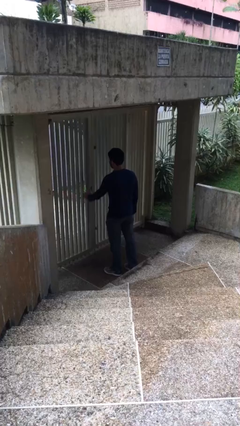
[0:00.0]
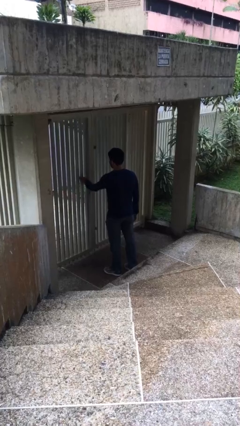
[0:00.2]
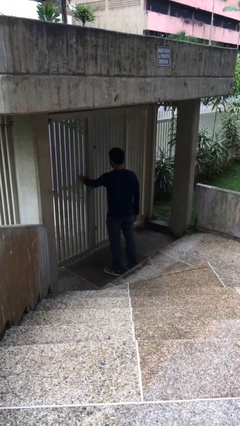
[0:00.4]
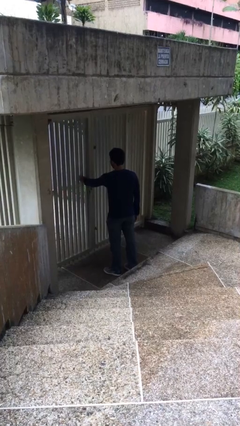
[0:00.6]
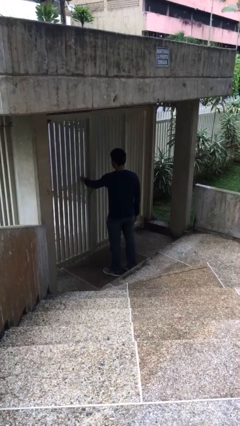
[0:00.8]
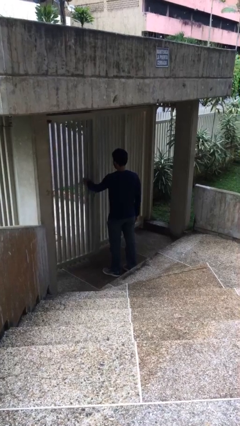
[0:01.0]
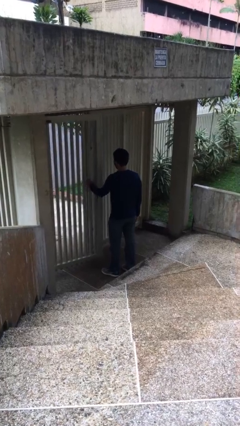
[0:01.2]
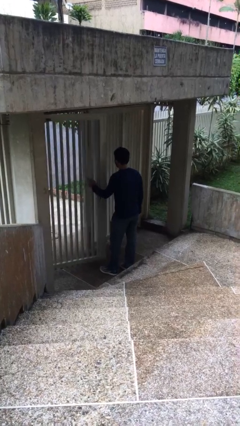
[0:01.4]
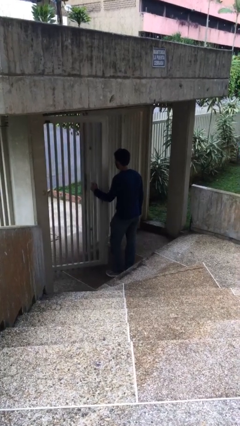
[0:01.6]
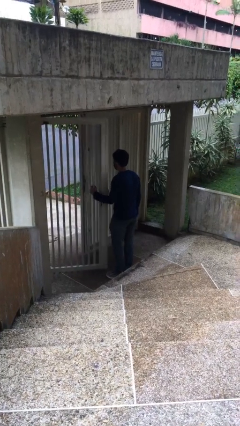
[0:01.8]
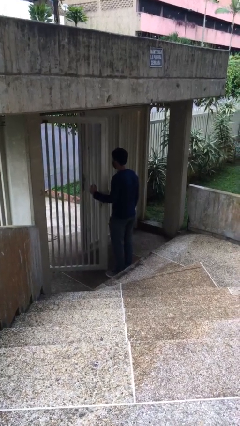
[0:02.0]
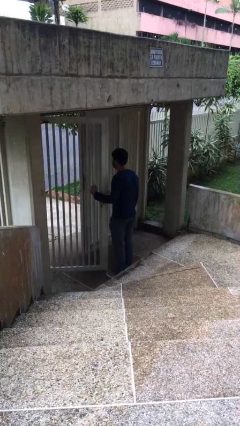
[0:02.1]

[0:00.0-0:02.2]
person opens facility door

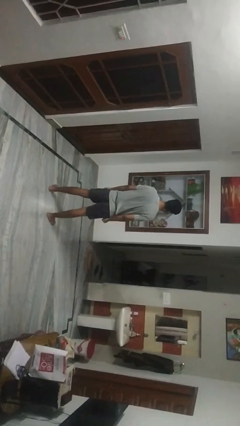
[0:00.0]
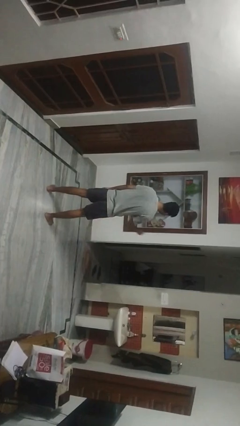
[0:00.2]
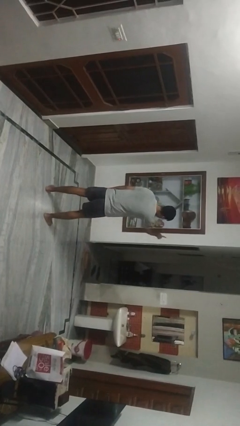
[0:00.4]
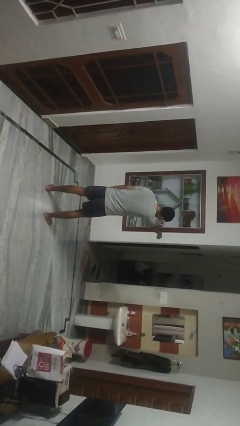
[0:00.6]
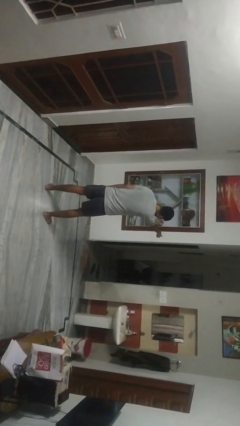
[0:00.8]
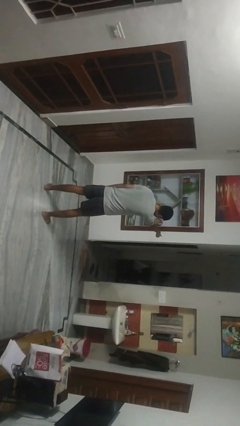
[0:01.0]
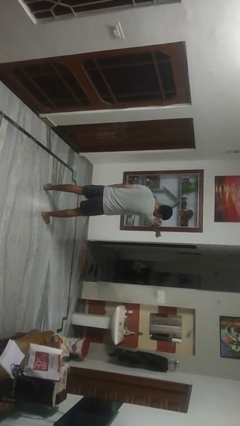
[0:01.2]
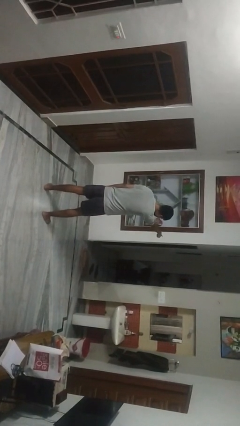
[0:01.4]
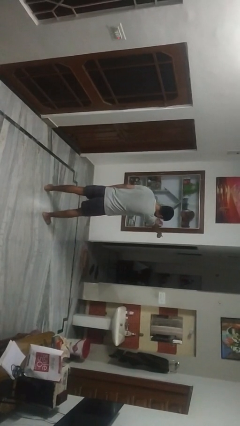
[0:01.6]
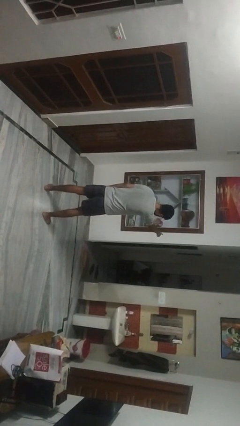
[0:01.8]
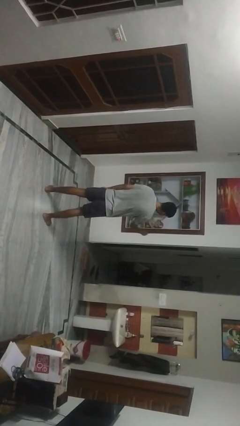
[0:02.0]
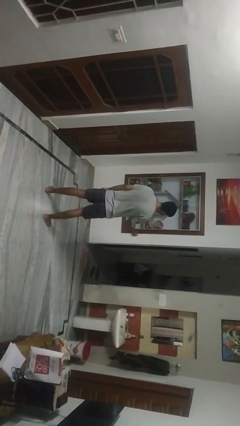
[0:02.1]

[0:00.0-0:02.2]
person points at person

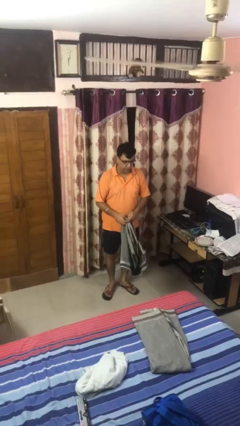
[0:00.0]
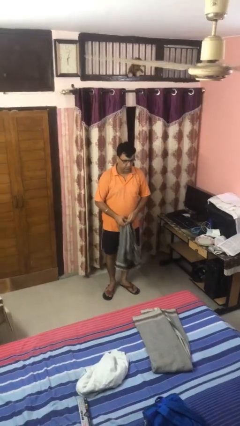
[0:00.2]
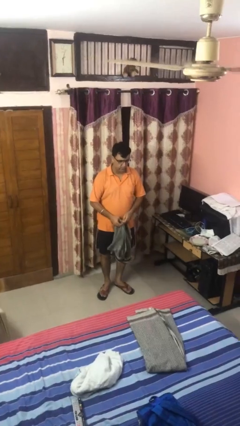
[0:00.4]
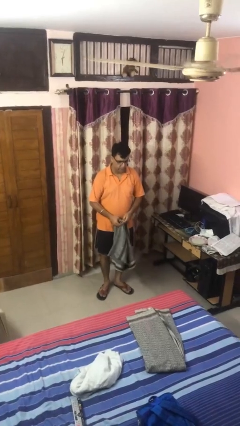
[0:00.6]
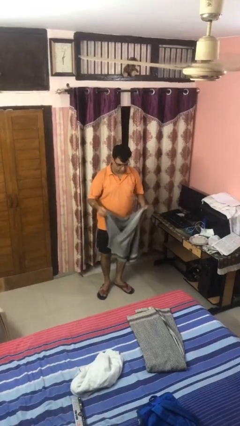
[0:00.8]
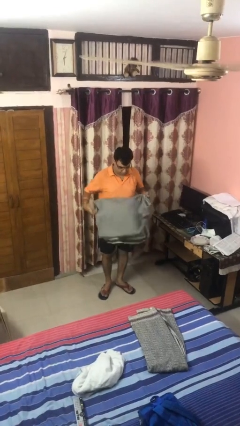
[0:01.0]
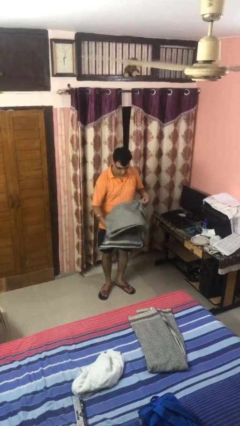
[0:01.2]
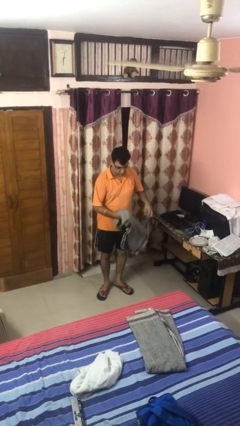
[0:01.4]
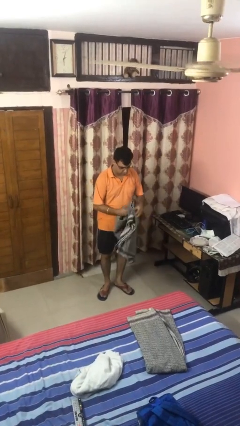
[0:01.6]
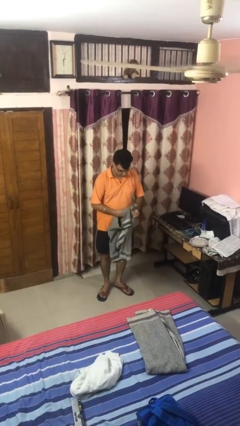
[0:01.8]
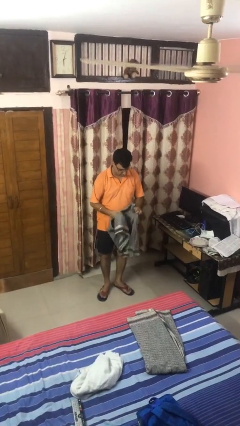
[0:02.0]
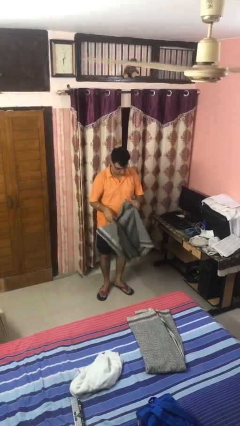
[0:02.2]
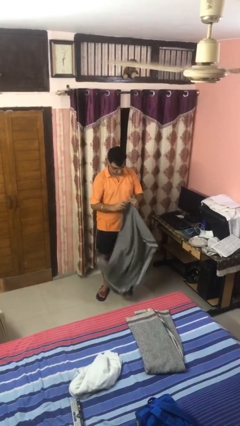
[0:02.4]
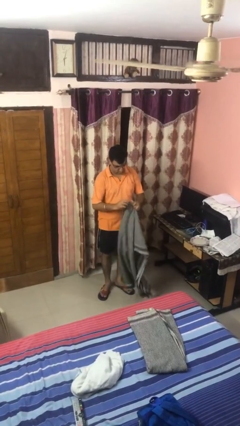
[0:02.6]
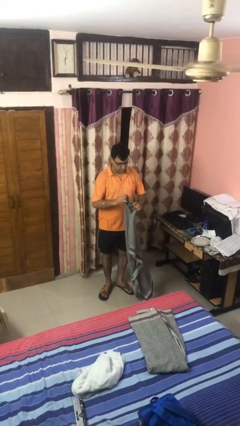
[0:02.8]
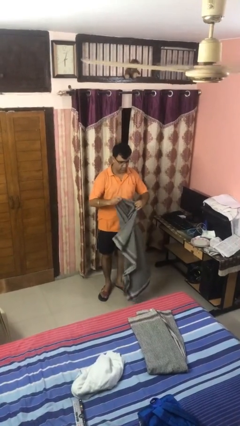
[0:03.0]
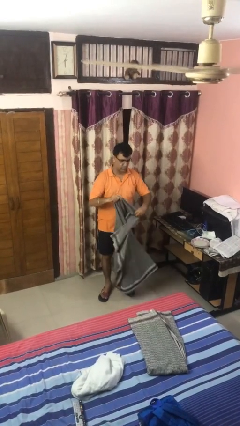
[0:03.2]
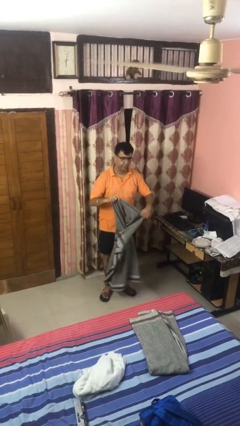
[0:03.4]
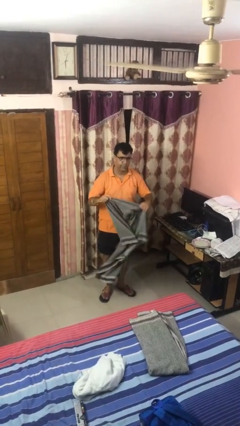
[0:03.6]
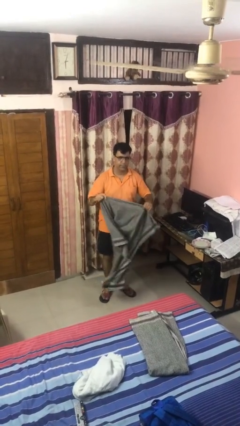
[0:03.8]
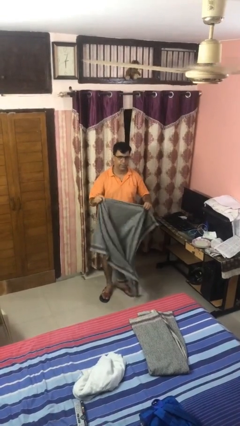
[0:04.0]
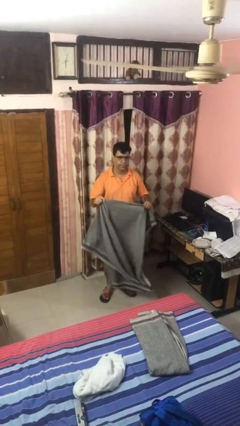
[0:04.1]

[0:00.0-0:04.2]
person unfolds blanket

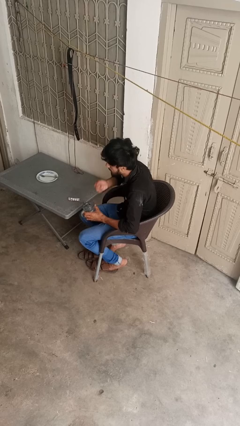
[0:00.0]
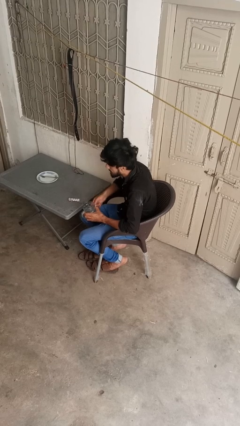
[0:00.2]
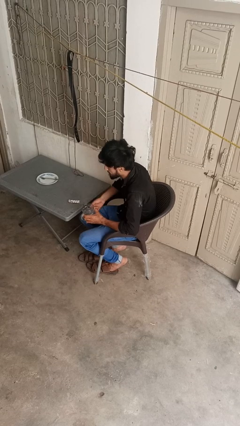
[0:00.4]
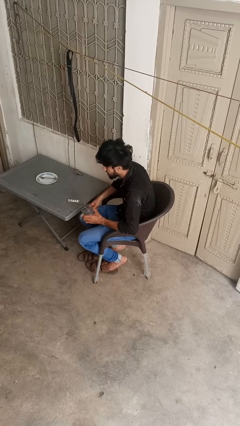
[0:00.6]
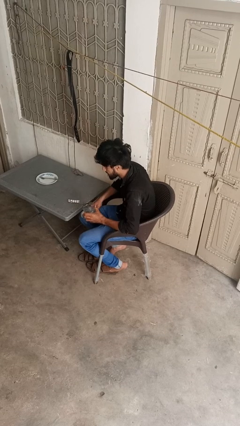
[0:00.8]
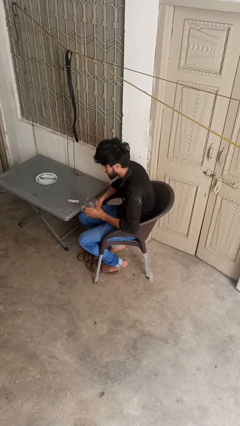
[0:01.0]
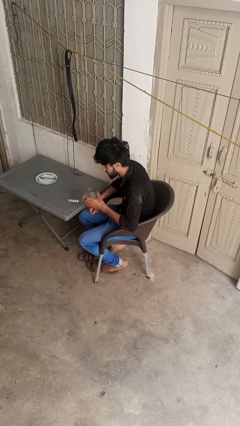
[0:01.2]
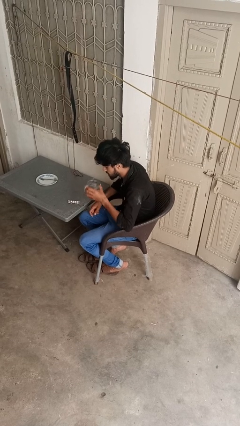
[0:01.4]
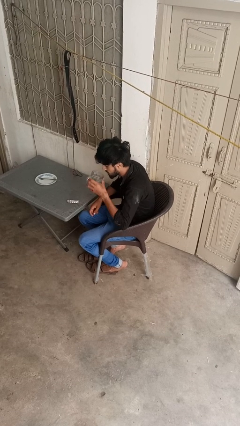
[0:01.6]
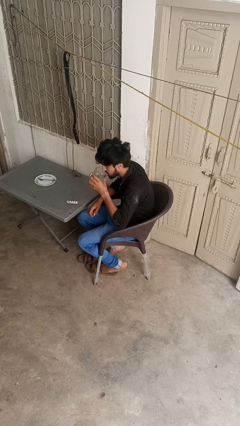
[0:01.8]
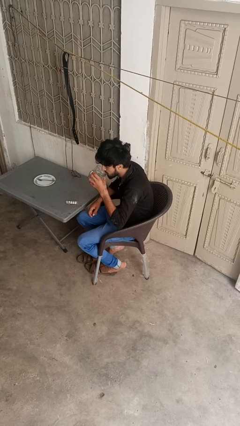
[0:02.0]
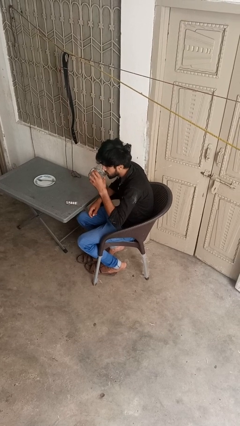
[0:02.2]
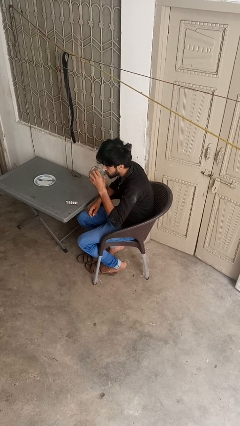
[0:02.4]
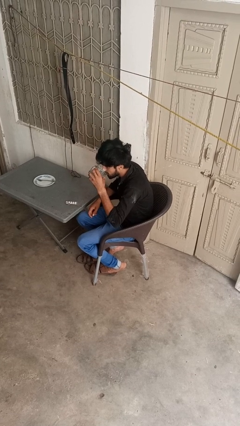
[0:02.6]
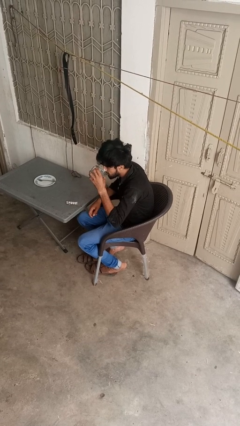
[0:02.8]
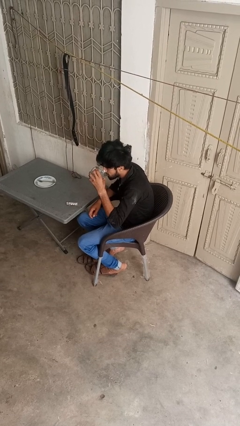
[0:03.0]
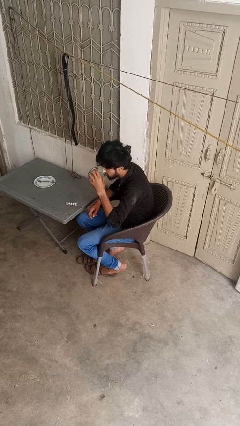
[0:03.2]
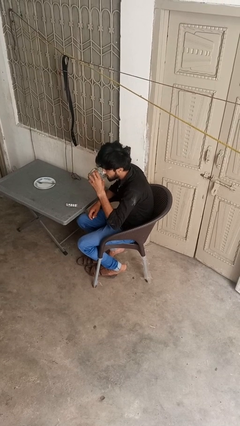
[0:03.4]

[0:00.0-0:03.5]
person drinks from cup

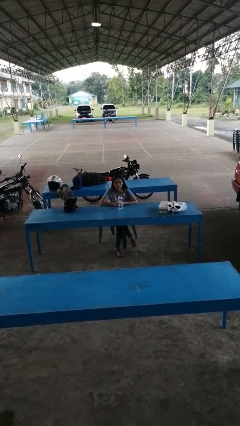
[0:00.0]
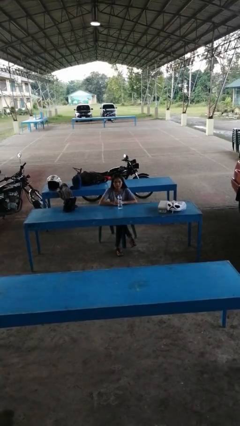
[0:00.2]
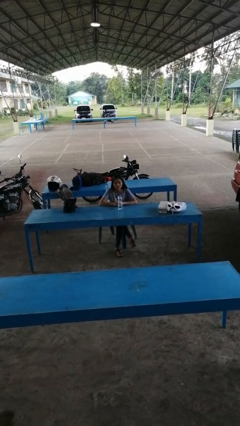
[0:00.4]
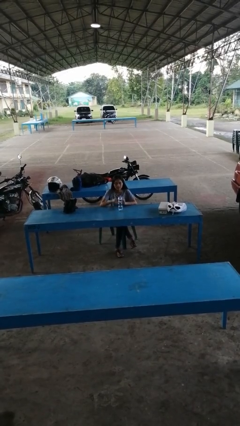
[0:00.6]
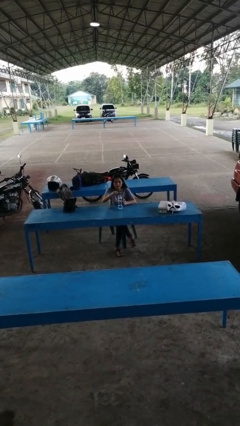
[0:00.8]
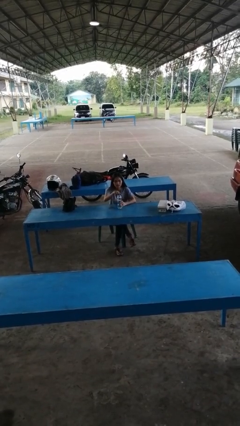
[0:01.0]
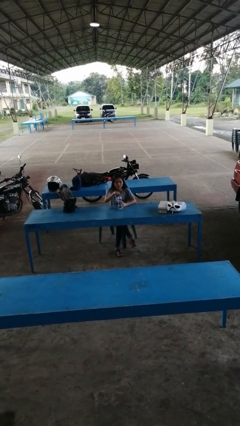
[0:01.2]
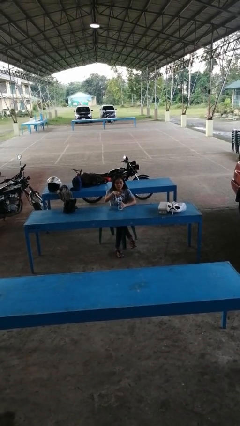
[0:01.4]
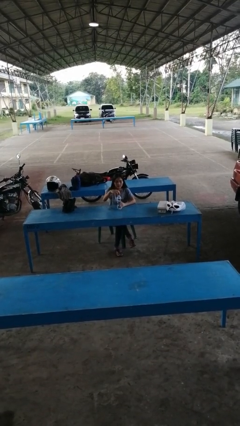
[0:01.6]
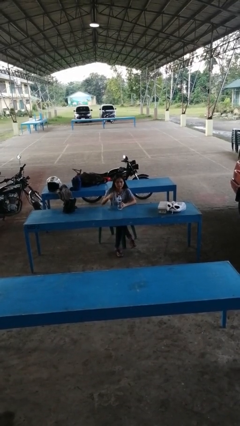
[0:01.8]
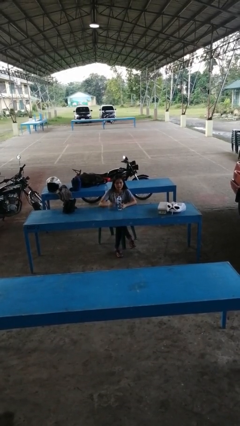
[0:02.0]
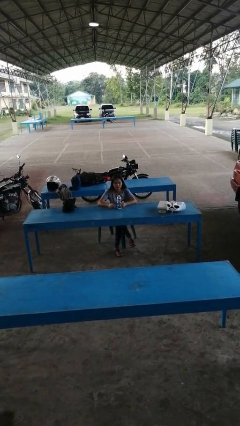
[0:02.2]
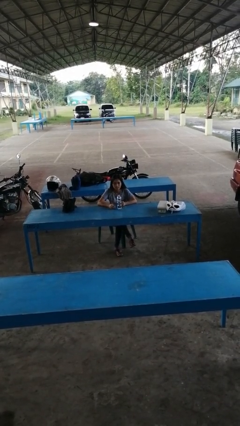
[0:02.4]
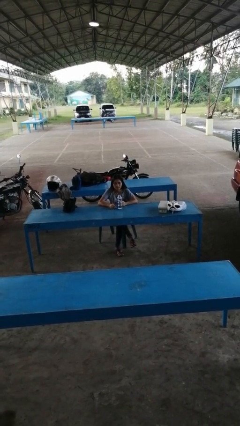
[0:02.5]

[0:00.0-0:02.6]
person unscrews lid from bottle

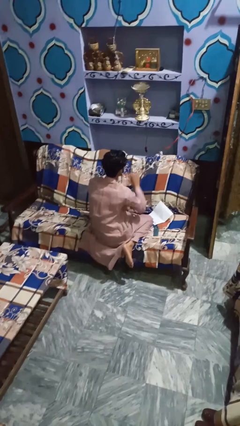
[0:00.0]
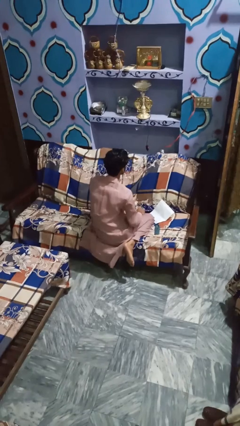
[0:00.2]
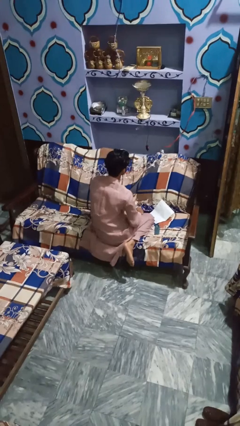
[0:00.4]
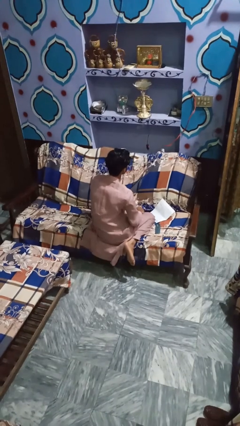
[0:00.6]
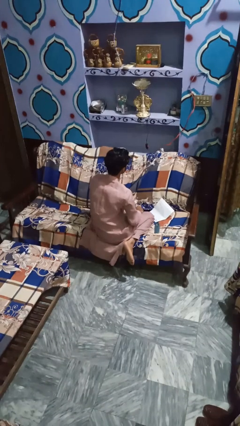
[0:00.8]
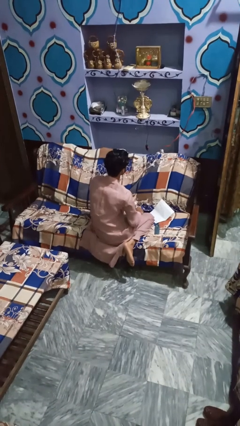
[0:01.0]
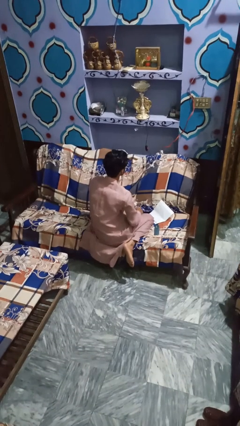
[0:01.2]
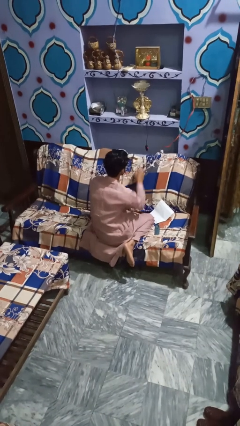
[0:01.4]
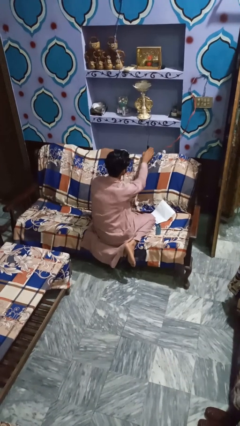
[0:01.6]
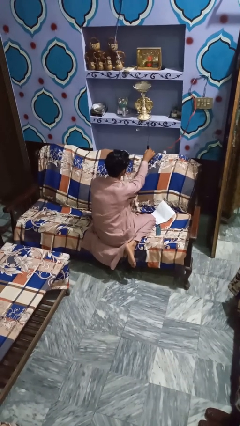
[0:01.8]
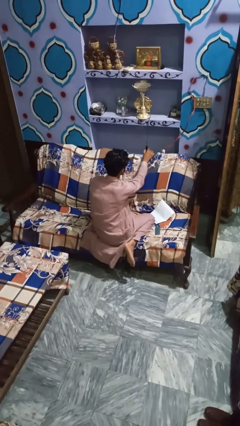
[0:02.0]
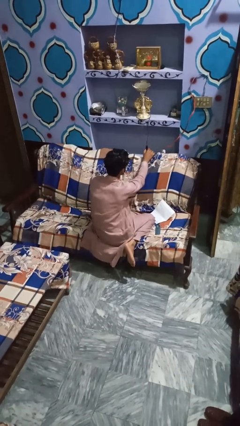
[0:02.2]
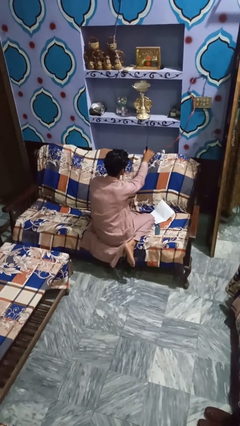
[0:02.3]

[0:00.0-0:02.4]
person turns off lamp

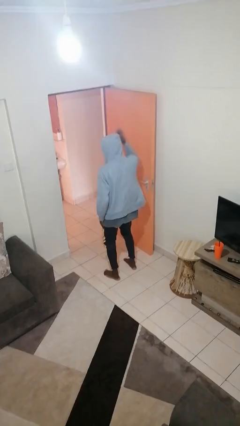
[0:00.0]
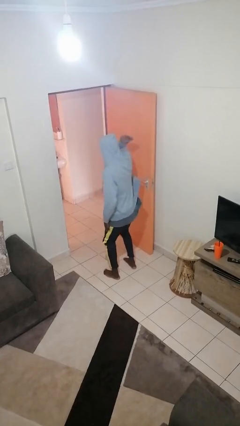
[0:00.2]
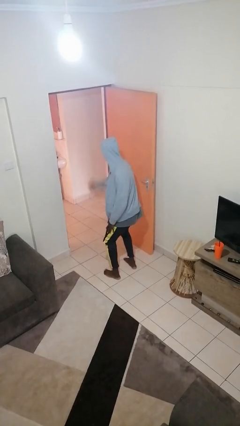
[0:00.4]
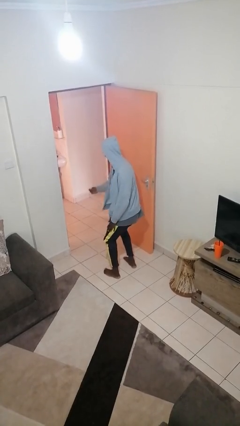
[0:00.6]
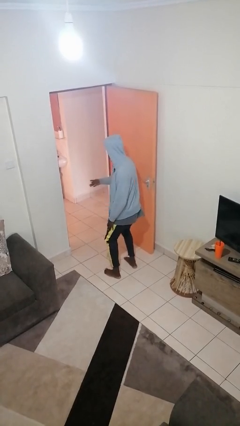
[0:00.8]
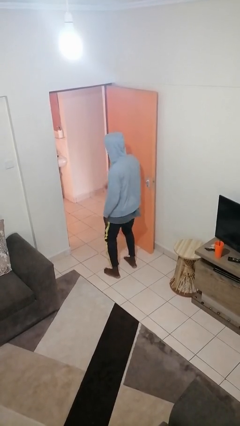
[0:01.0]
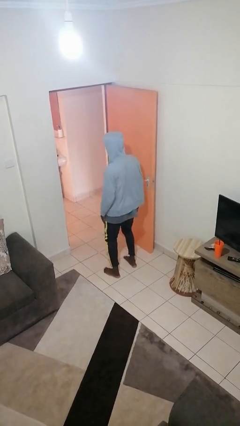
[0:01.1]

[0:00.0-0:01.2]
person karate chop
